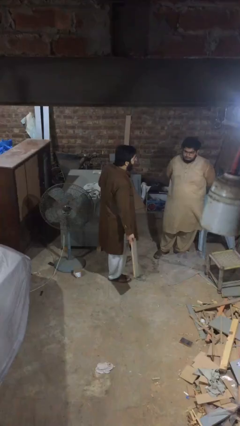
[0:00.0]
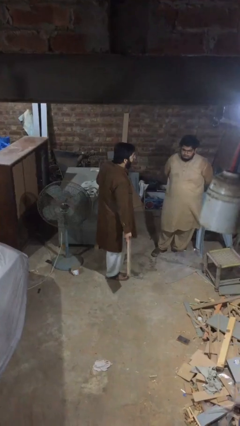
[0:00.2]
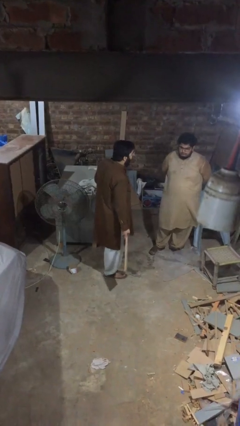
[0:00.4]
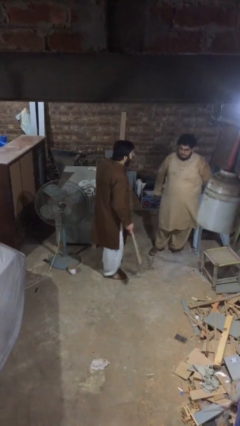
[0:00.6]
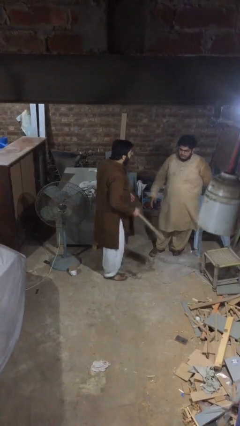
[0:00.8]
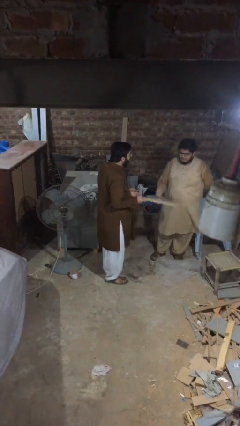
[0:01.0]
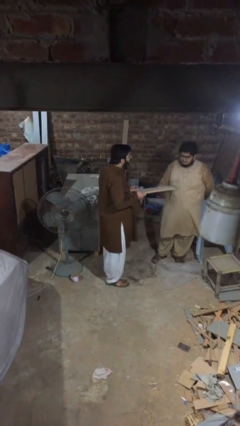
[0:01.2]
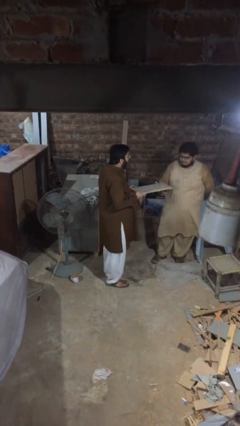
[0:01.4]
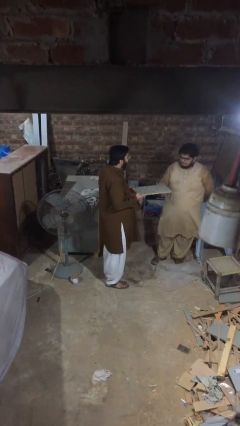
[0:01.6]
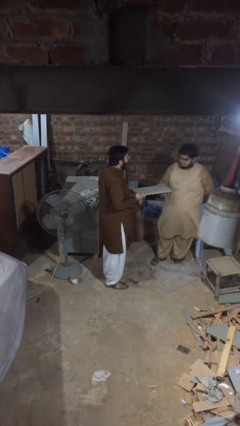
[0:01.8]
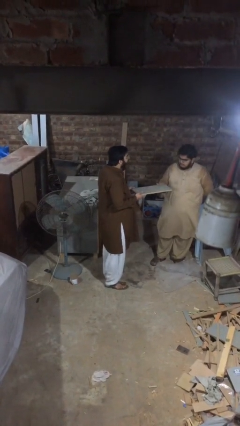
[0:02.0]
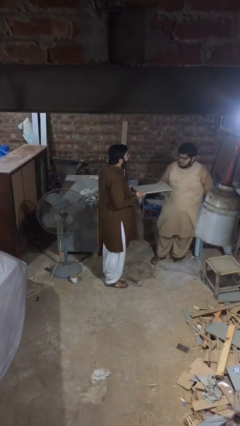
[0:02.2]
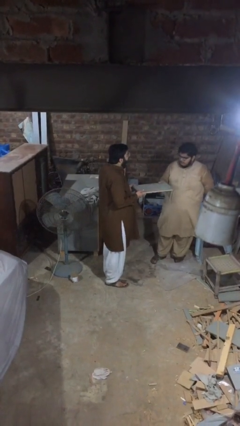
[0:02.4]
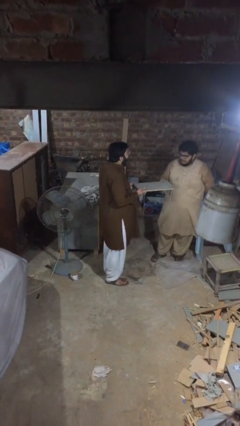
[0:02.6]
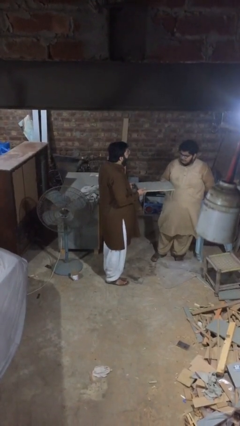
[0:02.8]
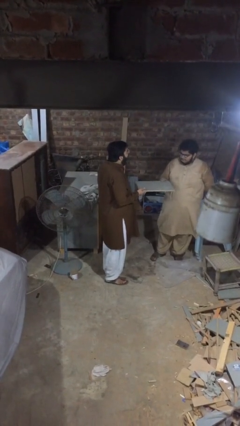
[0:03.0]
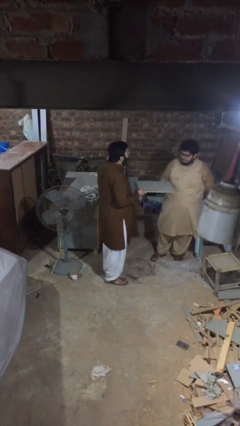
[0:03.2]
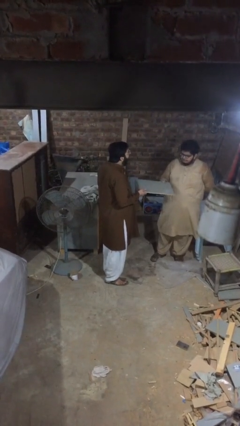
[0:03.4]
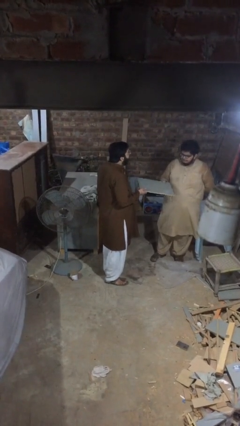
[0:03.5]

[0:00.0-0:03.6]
person transfers object to person

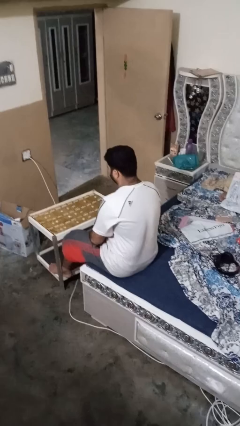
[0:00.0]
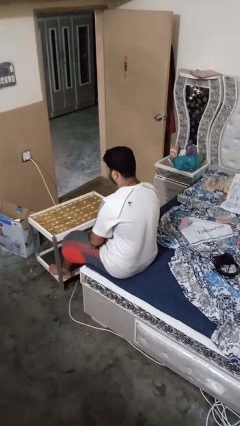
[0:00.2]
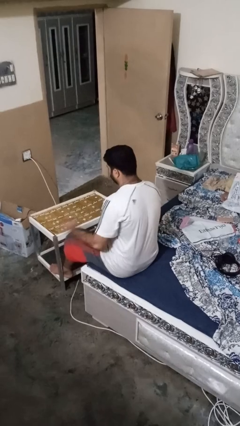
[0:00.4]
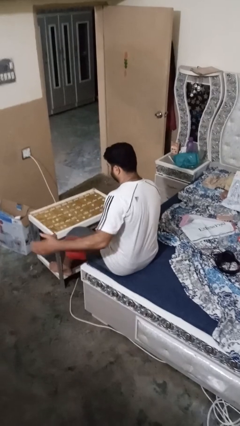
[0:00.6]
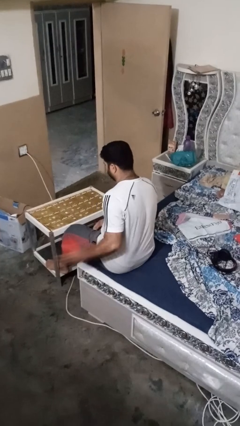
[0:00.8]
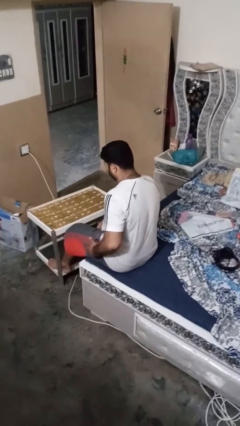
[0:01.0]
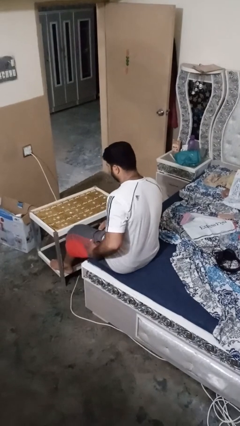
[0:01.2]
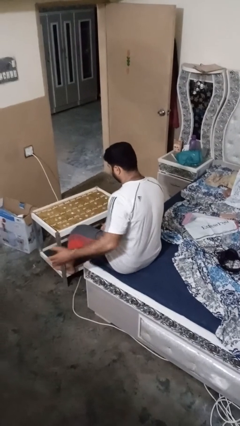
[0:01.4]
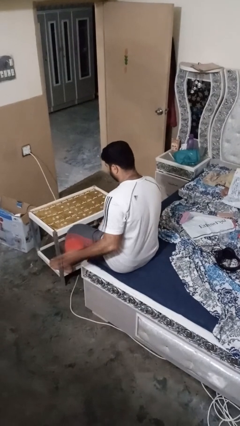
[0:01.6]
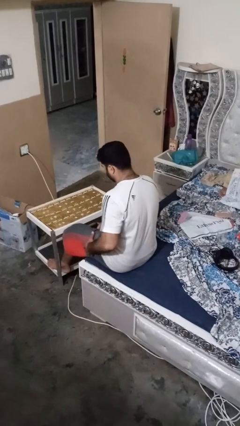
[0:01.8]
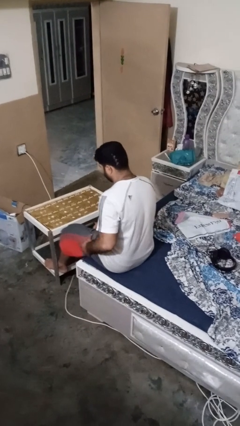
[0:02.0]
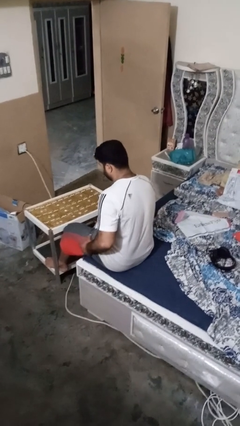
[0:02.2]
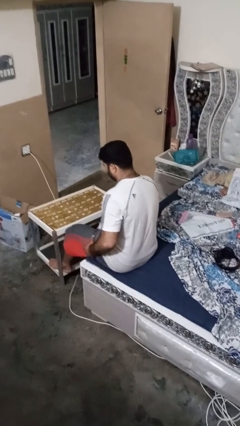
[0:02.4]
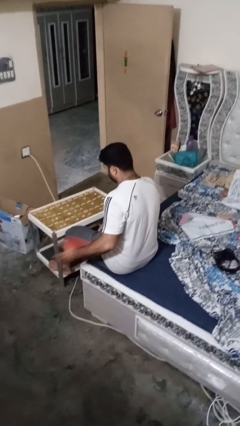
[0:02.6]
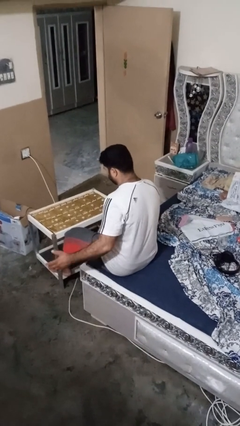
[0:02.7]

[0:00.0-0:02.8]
person slaps hands on thighs

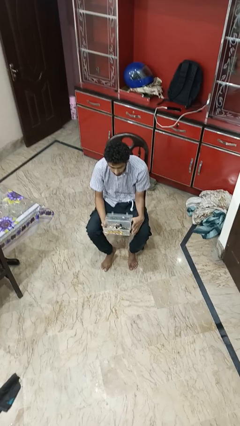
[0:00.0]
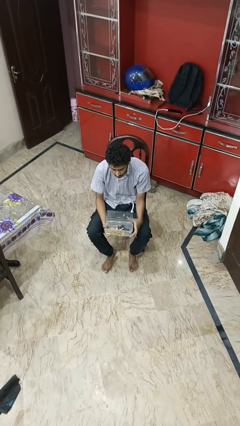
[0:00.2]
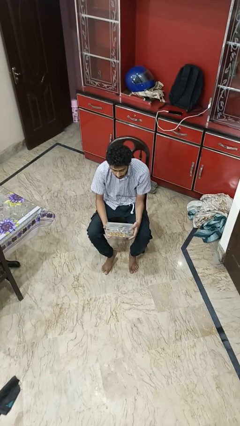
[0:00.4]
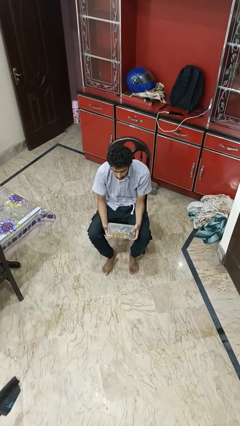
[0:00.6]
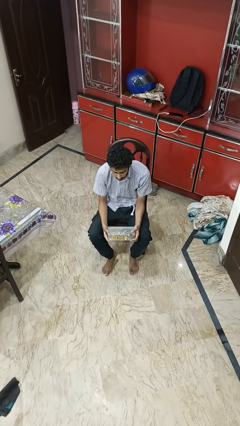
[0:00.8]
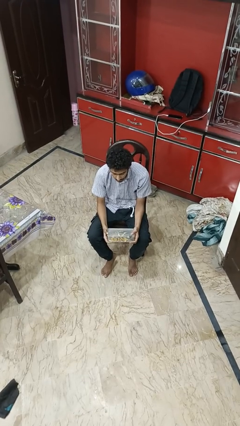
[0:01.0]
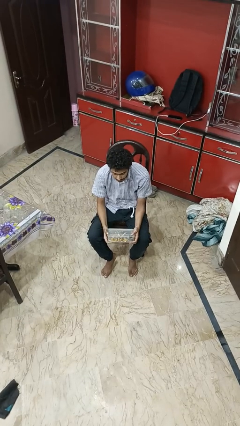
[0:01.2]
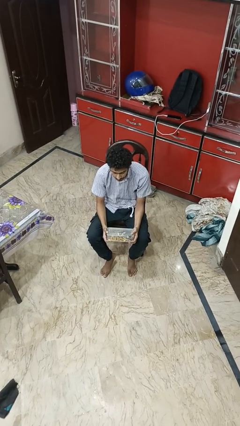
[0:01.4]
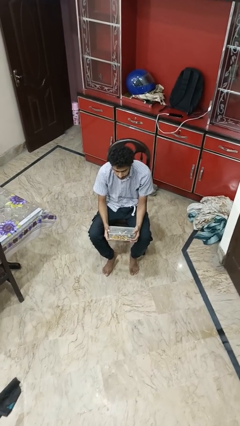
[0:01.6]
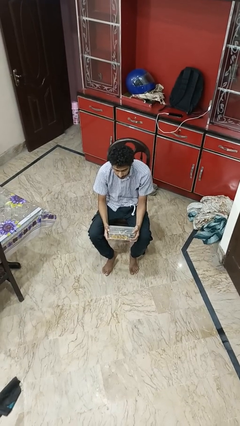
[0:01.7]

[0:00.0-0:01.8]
person closes jewelry box

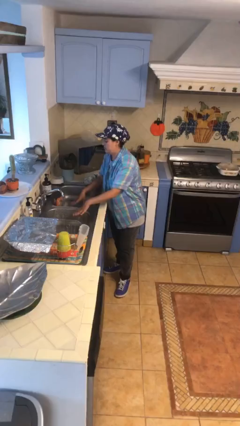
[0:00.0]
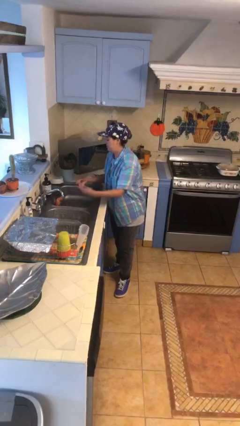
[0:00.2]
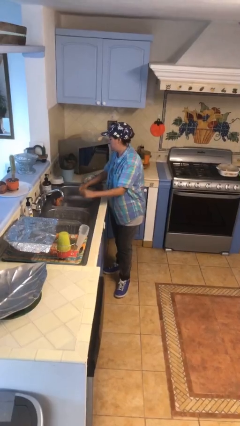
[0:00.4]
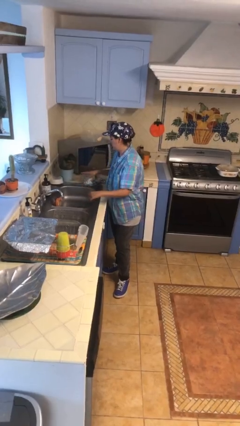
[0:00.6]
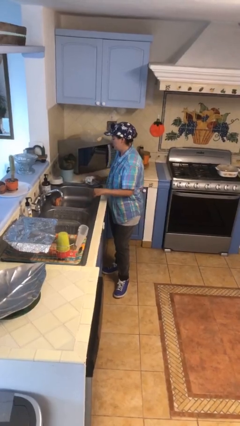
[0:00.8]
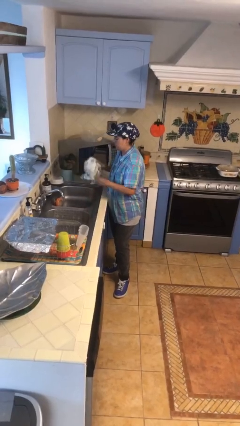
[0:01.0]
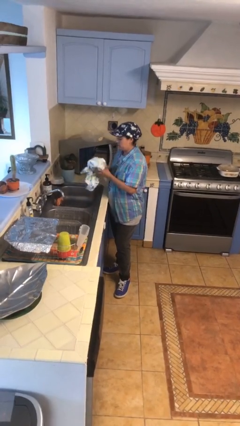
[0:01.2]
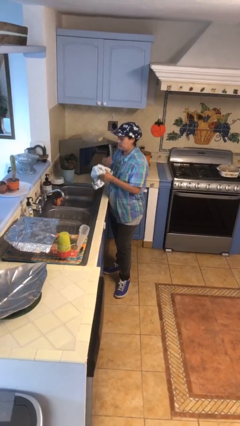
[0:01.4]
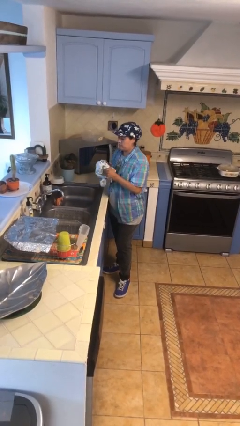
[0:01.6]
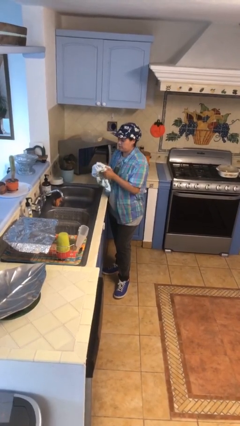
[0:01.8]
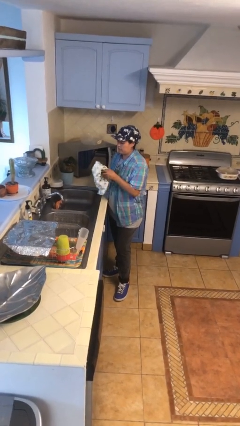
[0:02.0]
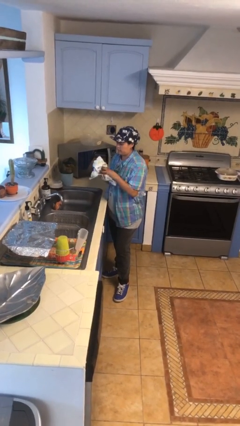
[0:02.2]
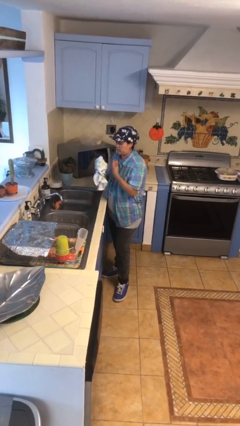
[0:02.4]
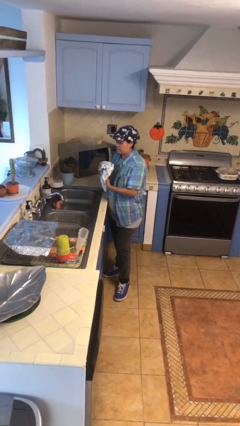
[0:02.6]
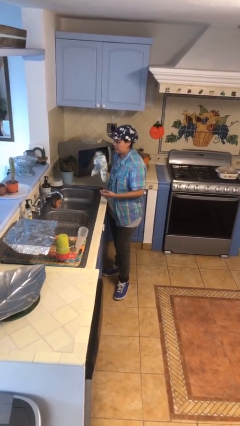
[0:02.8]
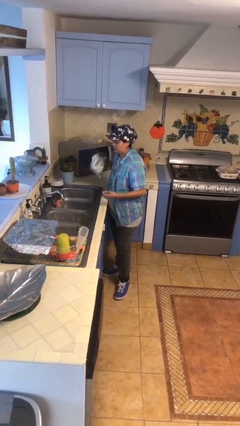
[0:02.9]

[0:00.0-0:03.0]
person dries hands with towel

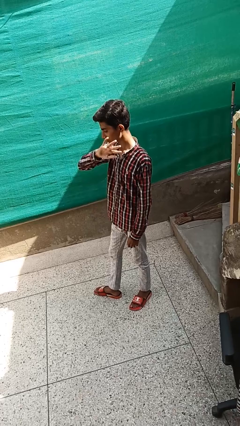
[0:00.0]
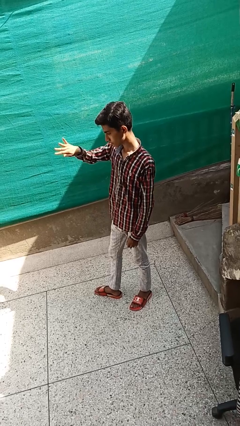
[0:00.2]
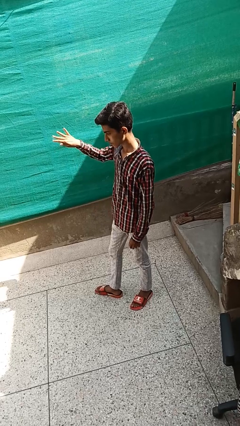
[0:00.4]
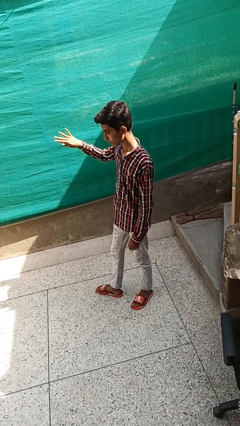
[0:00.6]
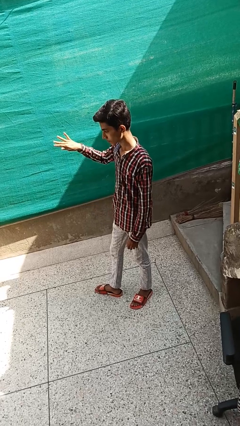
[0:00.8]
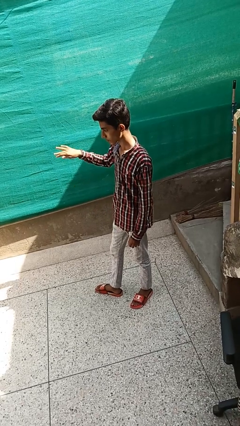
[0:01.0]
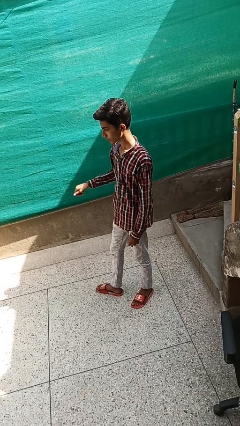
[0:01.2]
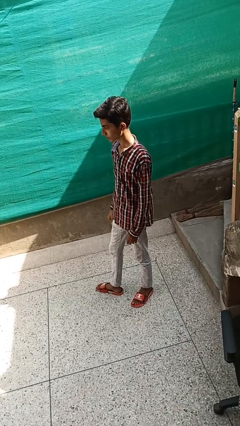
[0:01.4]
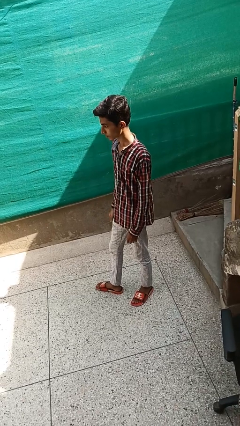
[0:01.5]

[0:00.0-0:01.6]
person gestures swipe right

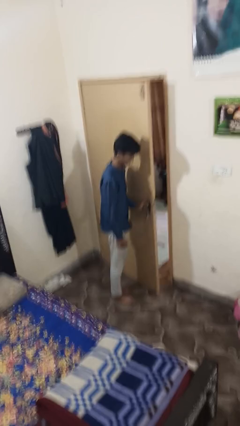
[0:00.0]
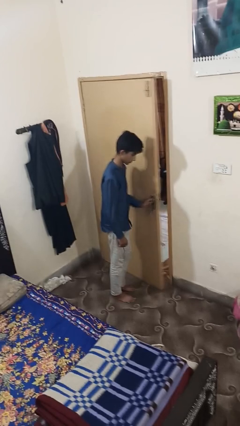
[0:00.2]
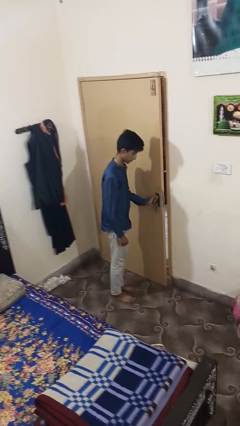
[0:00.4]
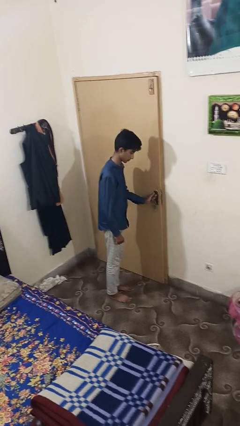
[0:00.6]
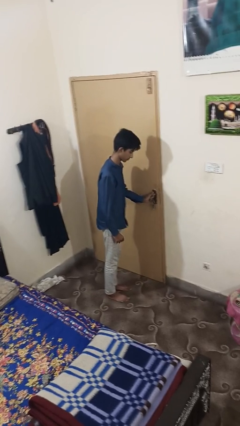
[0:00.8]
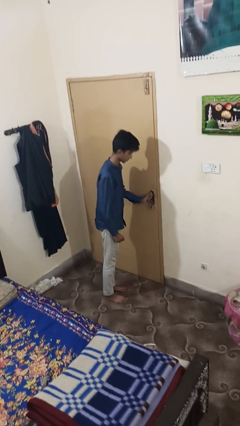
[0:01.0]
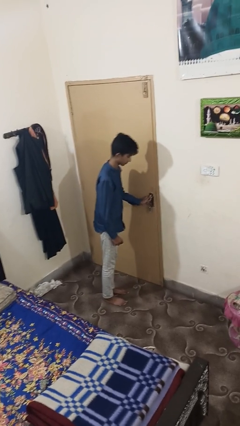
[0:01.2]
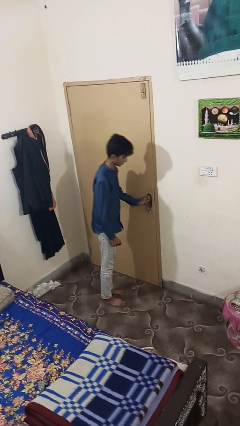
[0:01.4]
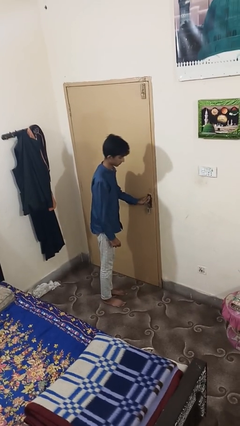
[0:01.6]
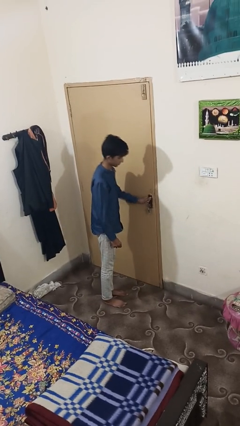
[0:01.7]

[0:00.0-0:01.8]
person closes facility door

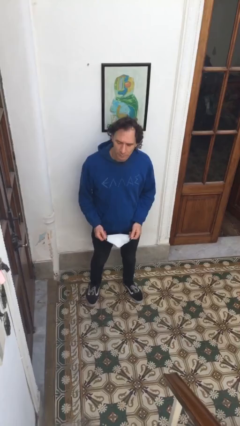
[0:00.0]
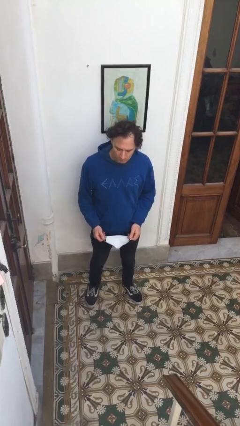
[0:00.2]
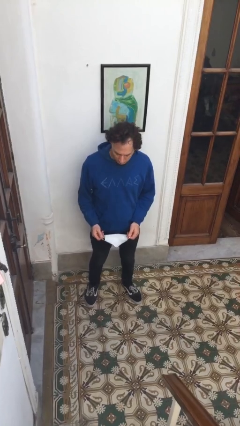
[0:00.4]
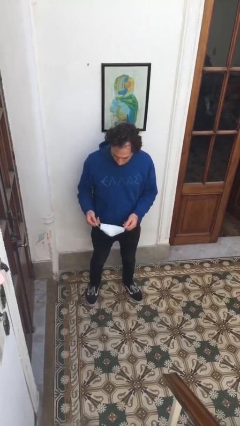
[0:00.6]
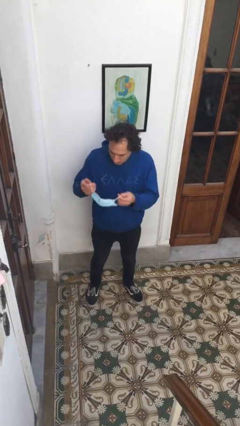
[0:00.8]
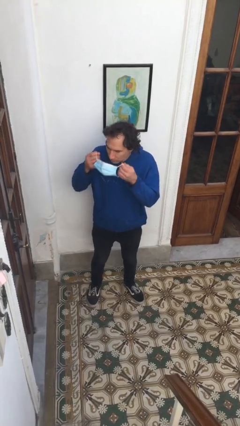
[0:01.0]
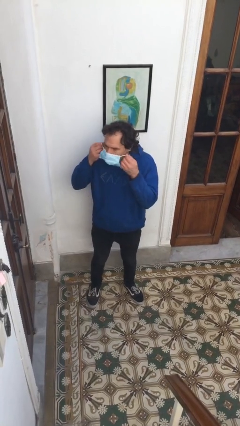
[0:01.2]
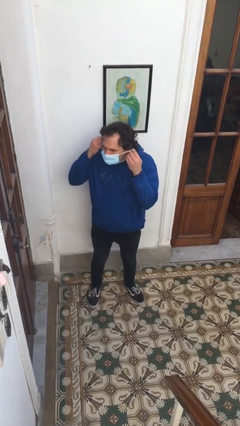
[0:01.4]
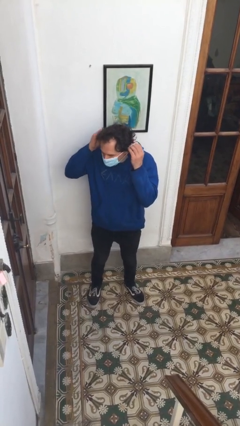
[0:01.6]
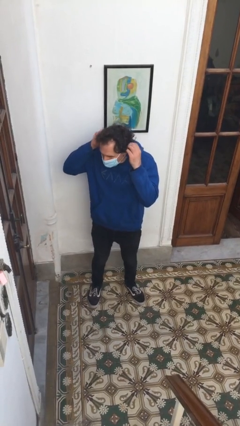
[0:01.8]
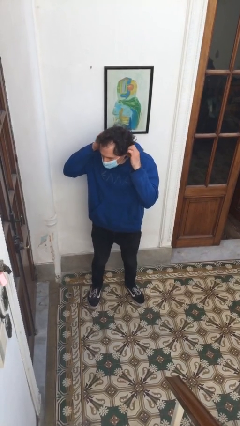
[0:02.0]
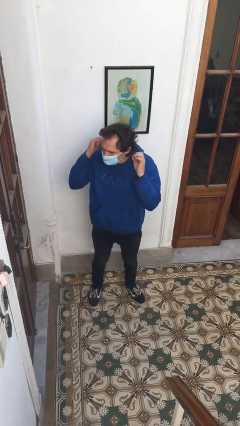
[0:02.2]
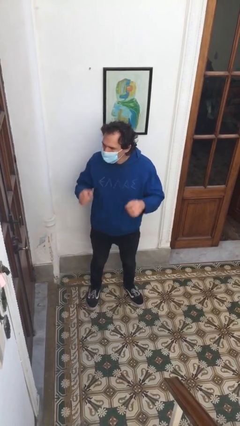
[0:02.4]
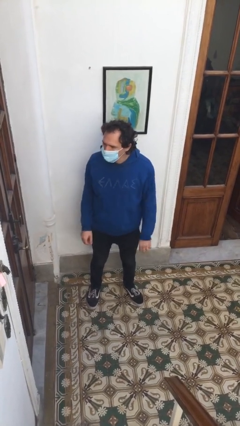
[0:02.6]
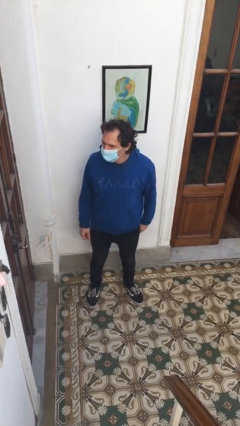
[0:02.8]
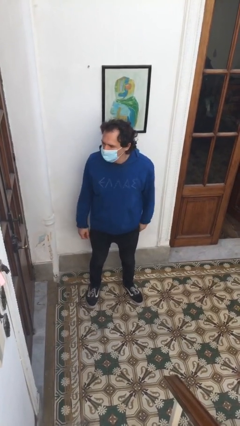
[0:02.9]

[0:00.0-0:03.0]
person puts on facemask
